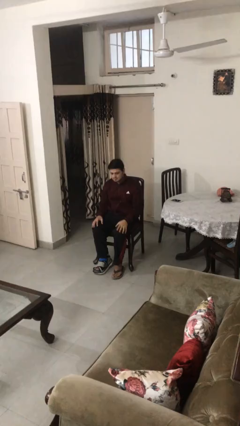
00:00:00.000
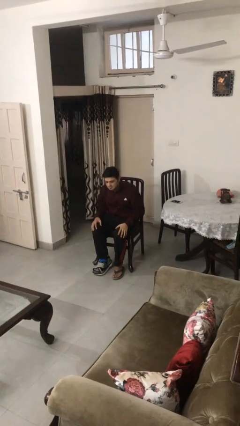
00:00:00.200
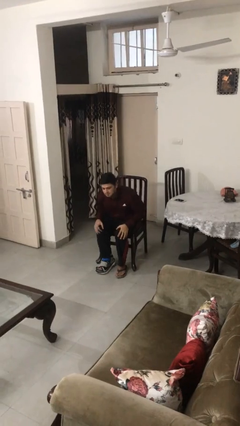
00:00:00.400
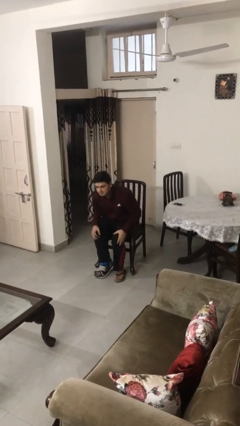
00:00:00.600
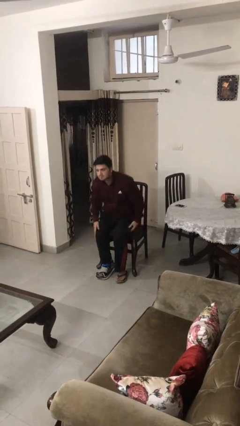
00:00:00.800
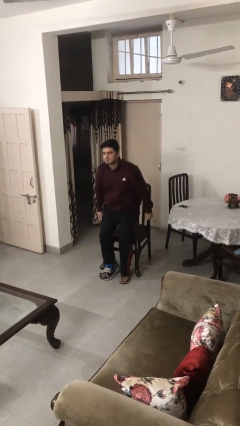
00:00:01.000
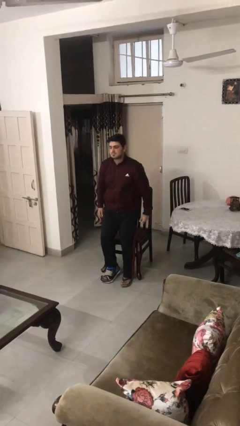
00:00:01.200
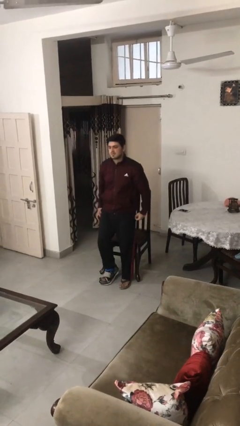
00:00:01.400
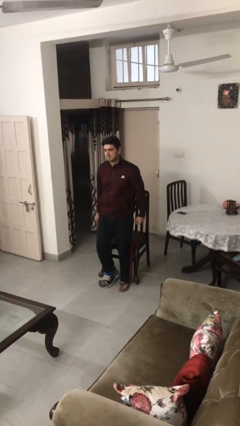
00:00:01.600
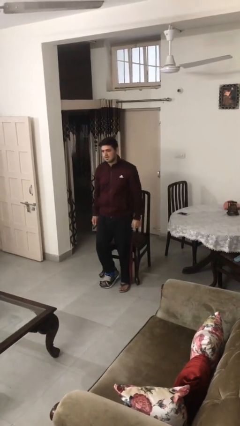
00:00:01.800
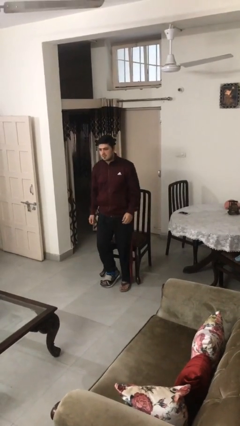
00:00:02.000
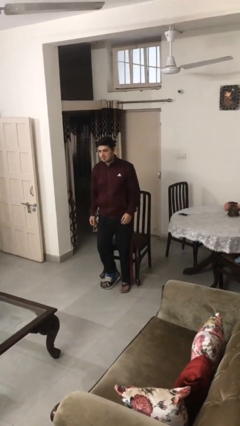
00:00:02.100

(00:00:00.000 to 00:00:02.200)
person stands up

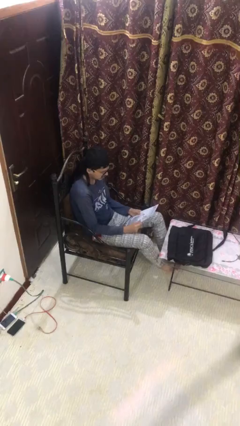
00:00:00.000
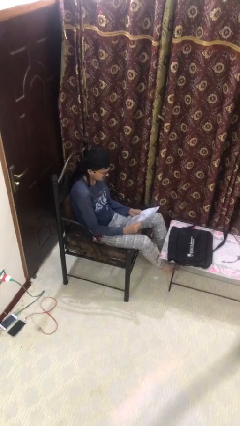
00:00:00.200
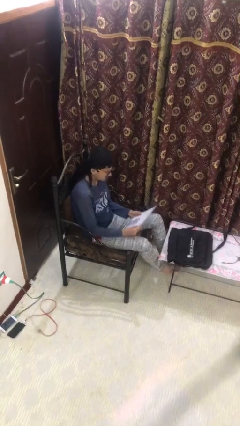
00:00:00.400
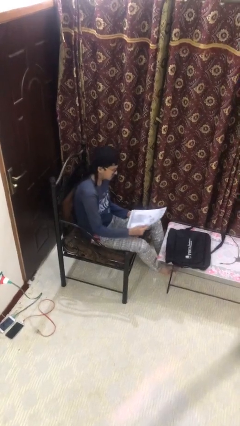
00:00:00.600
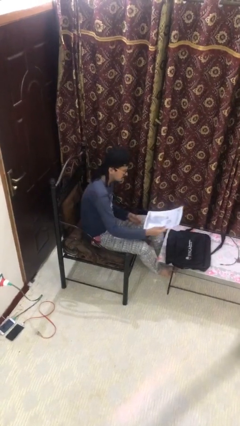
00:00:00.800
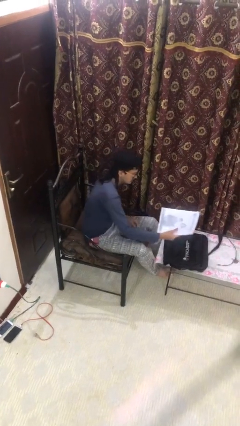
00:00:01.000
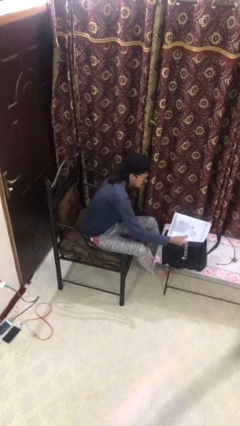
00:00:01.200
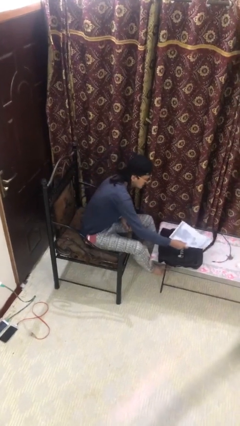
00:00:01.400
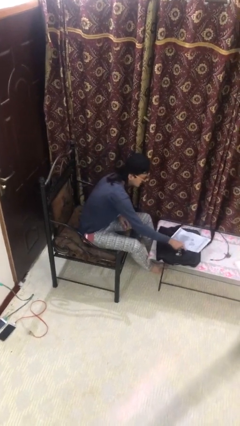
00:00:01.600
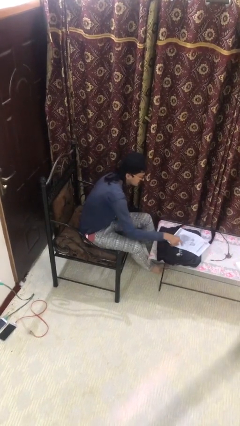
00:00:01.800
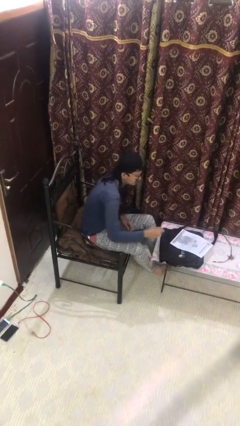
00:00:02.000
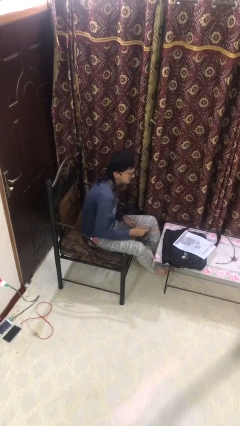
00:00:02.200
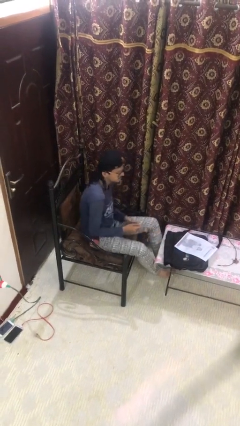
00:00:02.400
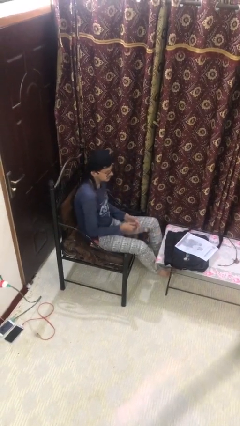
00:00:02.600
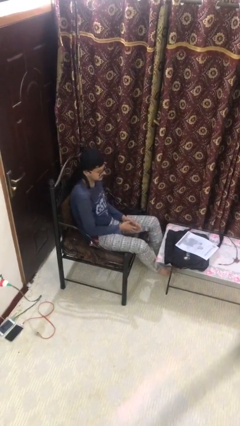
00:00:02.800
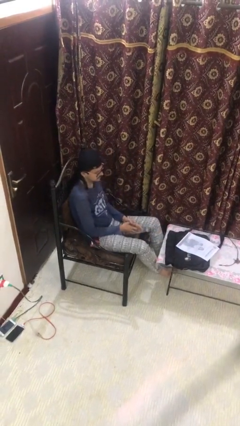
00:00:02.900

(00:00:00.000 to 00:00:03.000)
person puts down object on table

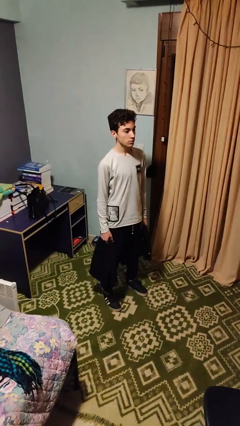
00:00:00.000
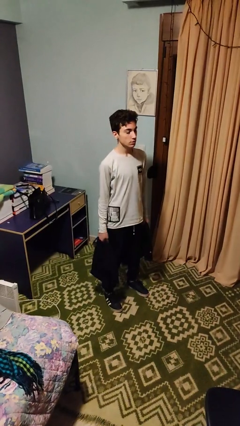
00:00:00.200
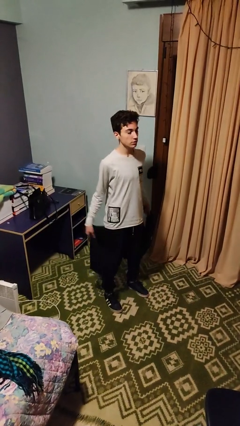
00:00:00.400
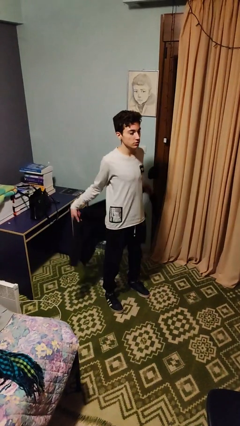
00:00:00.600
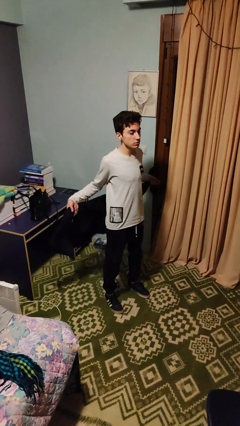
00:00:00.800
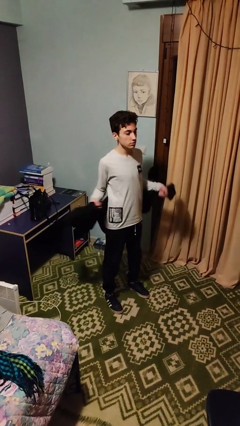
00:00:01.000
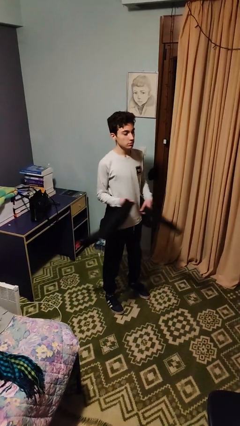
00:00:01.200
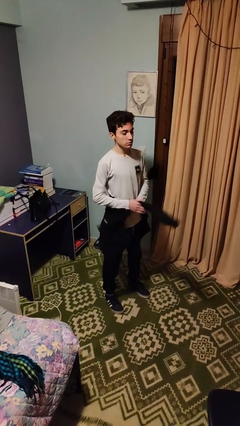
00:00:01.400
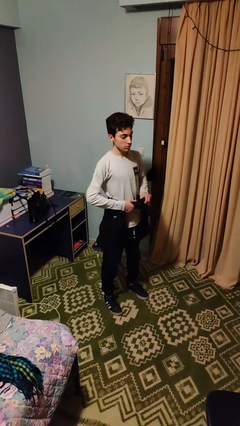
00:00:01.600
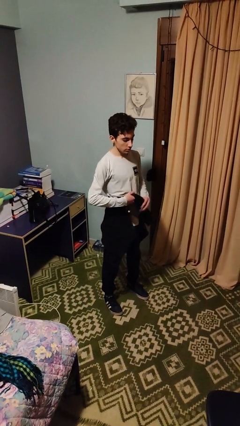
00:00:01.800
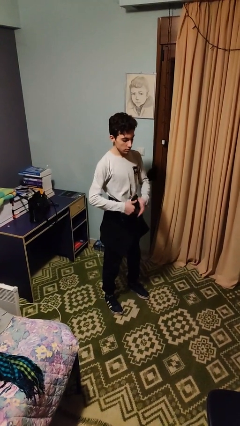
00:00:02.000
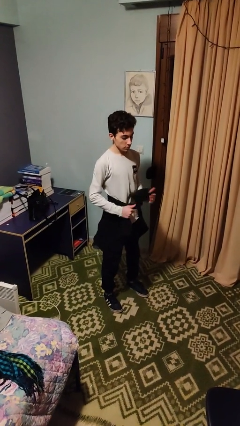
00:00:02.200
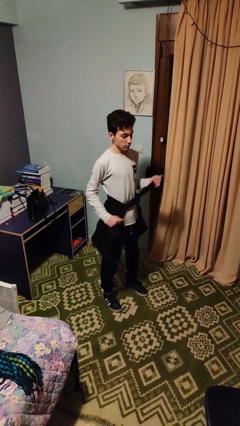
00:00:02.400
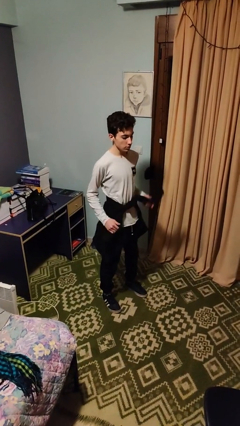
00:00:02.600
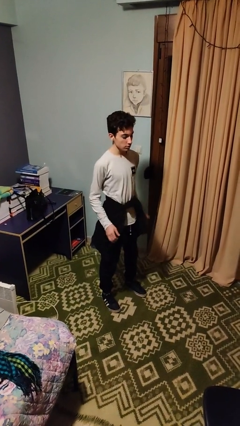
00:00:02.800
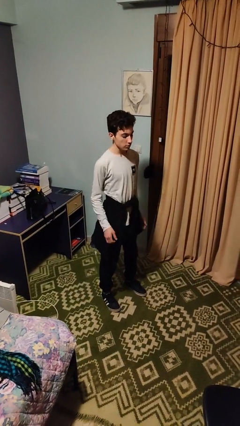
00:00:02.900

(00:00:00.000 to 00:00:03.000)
person ties jacket around waist

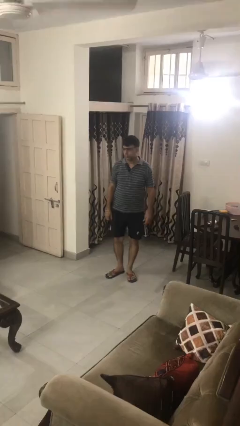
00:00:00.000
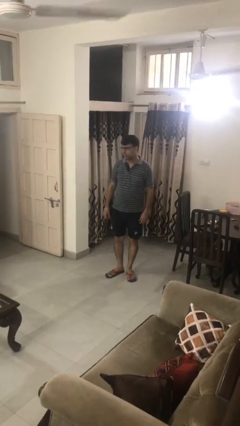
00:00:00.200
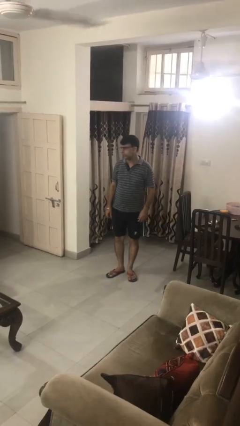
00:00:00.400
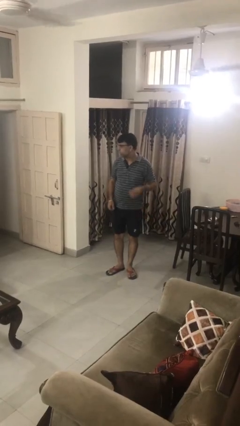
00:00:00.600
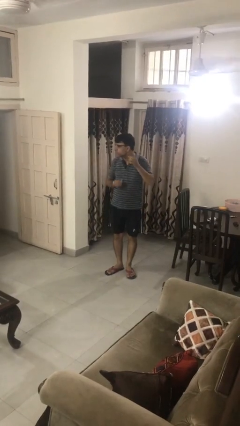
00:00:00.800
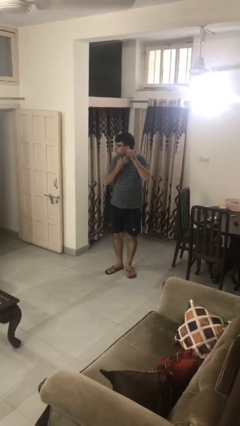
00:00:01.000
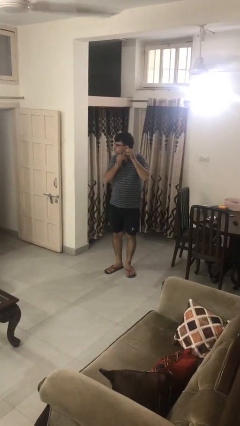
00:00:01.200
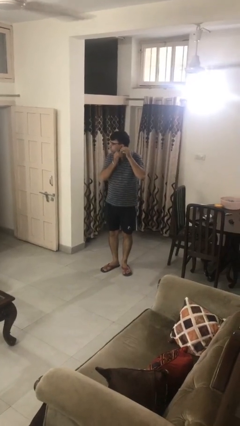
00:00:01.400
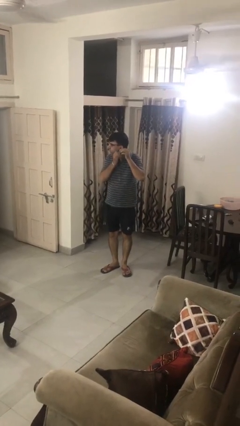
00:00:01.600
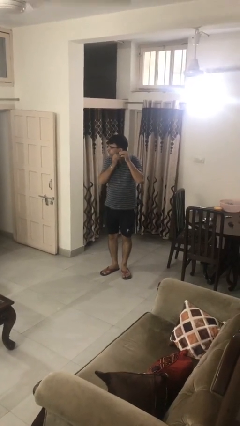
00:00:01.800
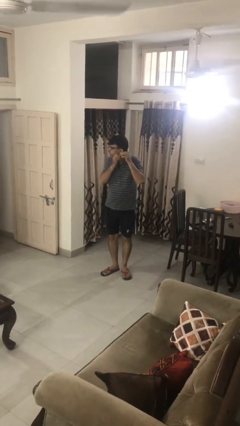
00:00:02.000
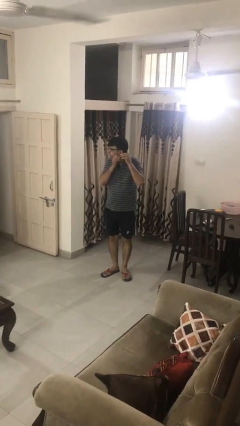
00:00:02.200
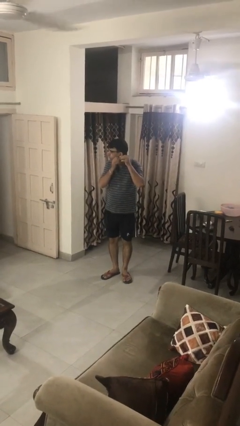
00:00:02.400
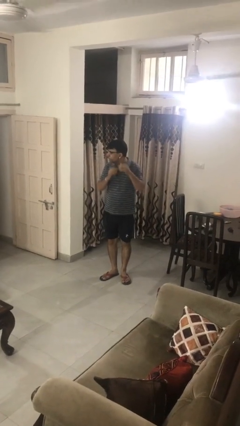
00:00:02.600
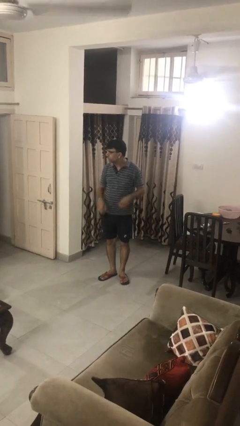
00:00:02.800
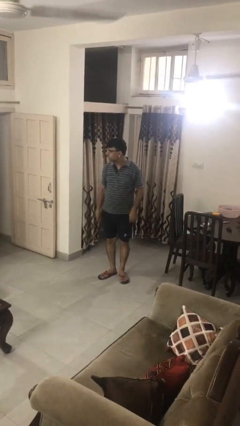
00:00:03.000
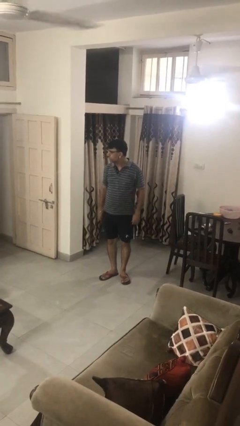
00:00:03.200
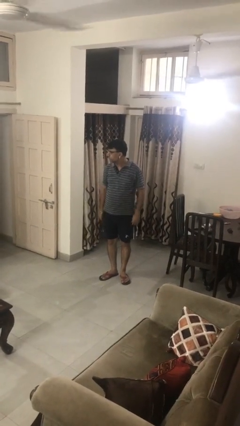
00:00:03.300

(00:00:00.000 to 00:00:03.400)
person puts on earrings

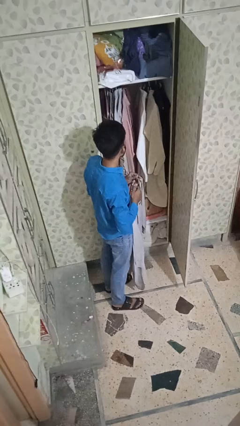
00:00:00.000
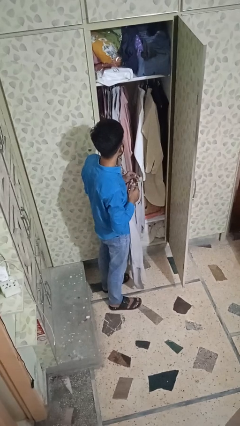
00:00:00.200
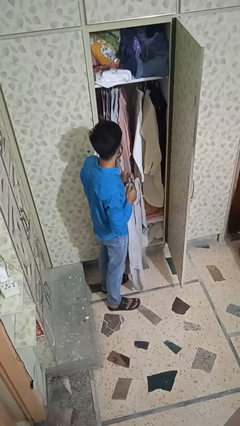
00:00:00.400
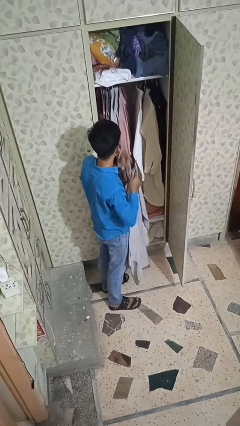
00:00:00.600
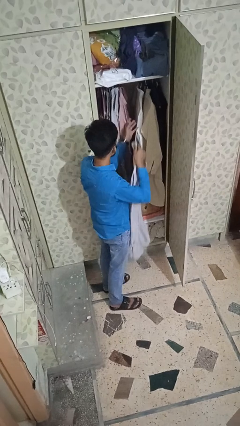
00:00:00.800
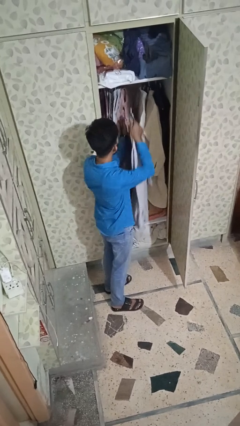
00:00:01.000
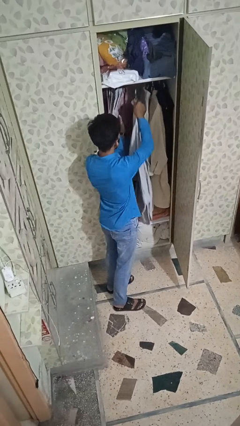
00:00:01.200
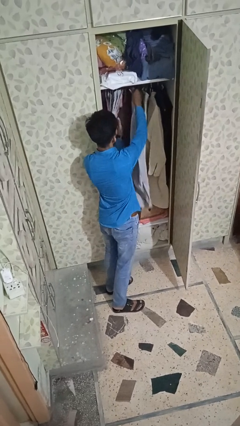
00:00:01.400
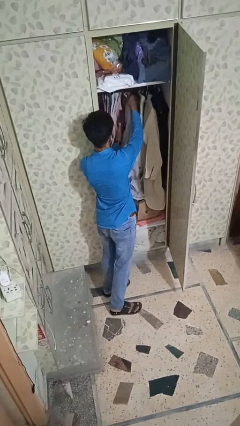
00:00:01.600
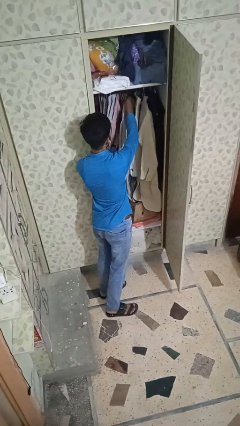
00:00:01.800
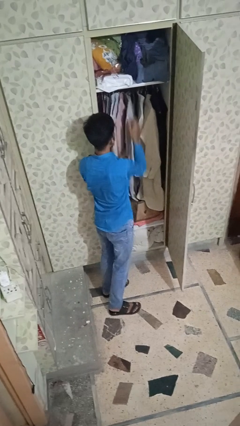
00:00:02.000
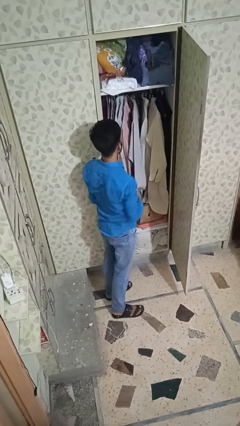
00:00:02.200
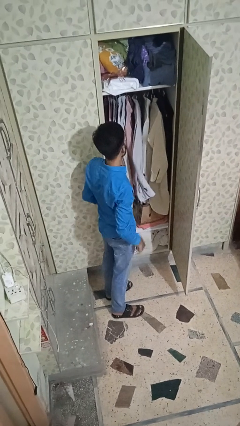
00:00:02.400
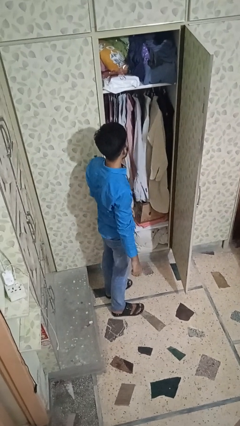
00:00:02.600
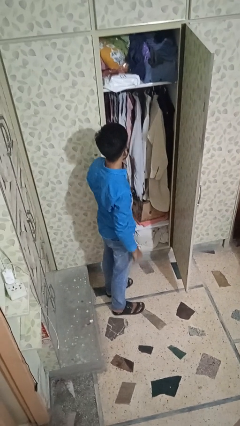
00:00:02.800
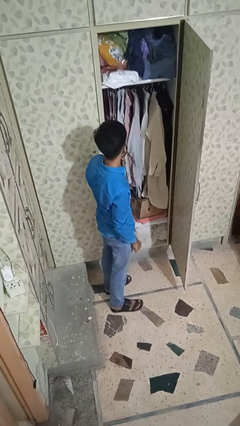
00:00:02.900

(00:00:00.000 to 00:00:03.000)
person puts clothes into closet

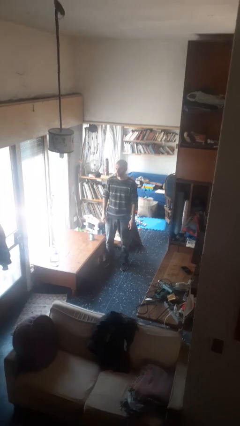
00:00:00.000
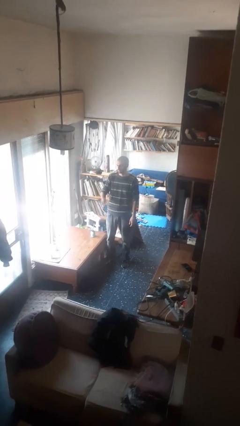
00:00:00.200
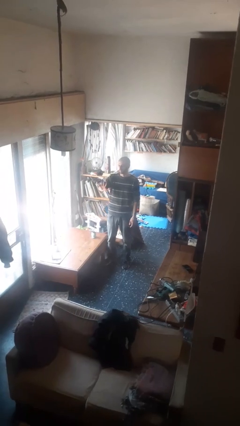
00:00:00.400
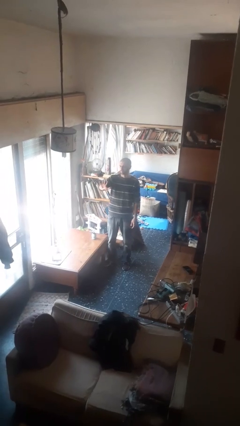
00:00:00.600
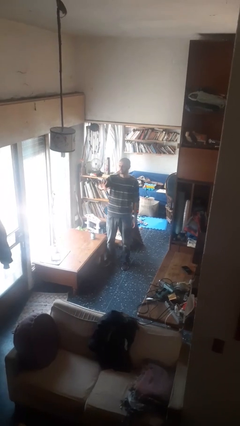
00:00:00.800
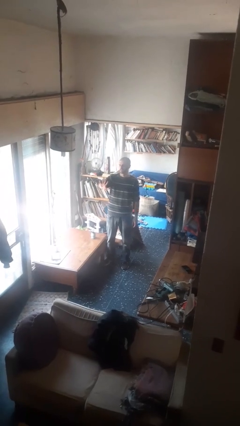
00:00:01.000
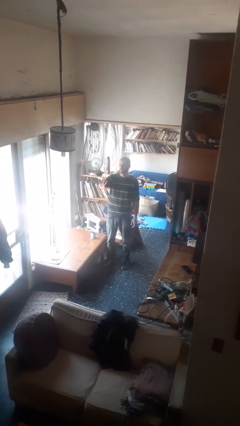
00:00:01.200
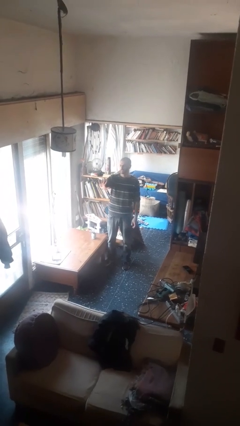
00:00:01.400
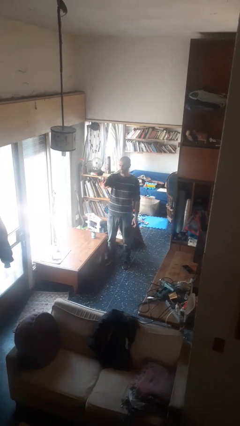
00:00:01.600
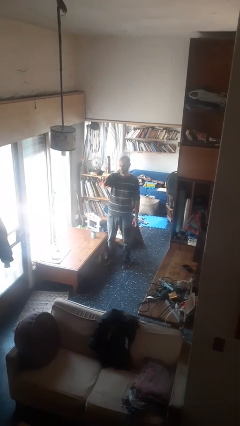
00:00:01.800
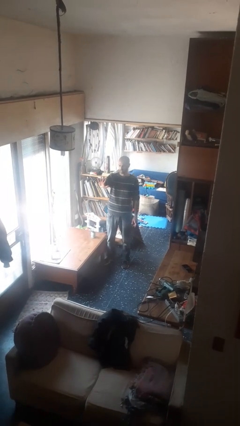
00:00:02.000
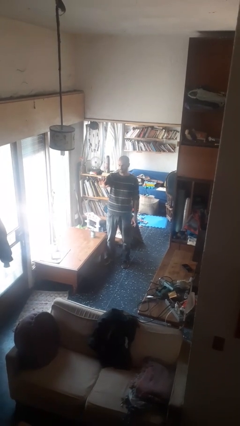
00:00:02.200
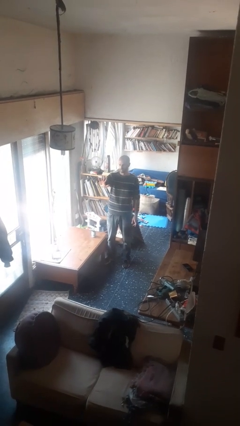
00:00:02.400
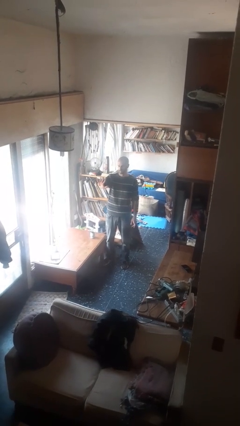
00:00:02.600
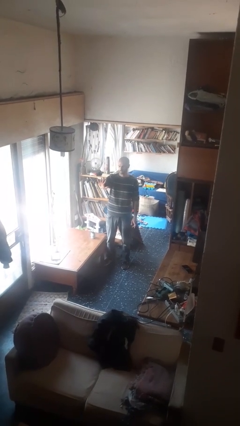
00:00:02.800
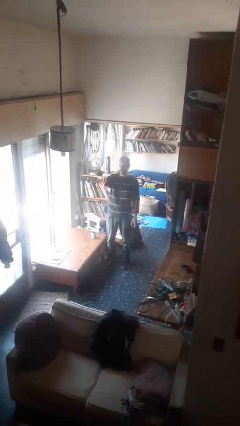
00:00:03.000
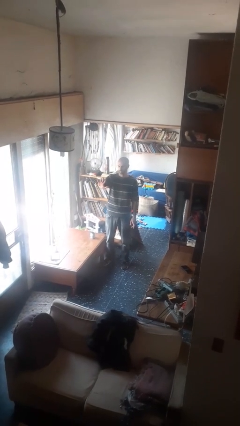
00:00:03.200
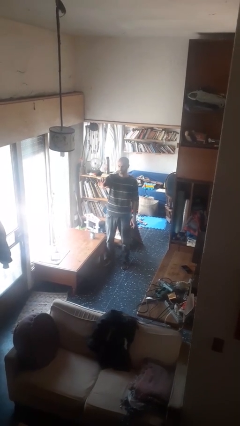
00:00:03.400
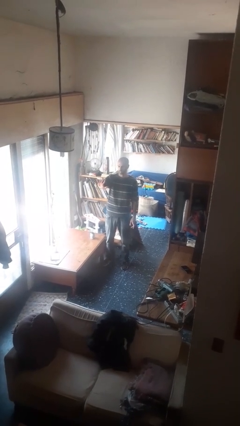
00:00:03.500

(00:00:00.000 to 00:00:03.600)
person gestures number five
